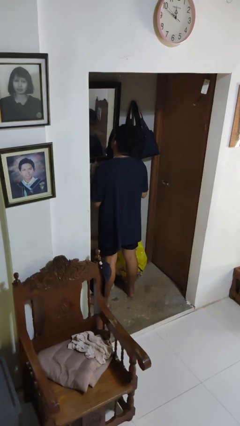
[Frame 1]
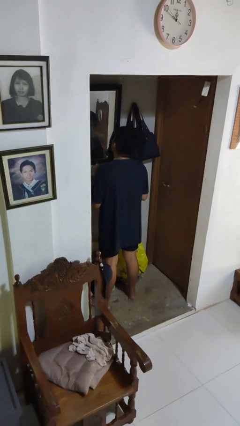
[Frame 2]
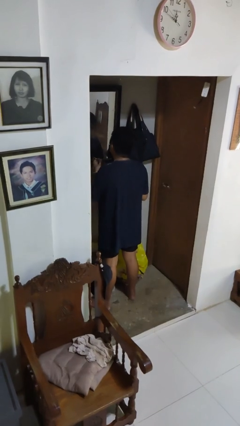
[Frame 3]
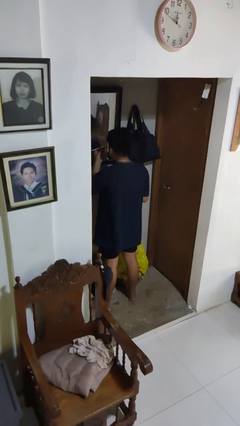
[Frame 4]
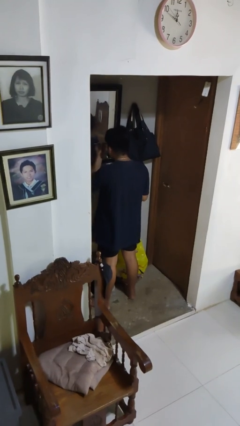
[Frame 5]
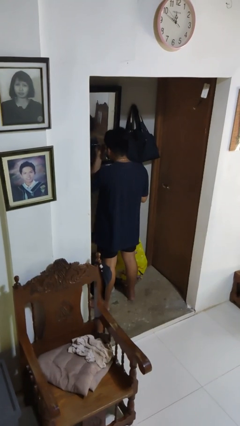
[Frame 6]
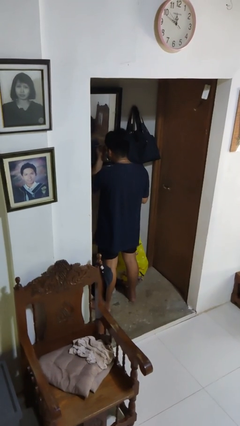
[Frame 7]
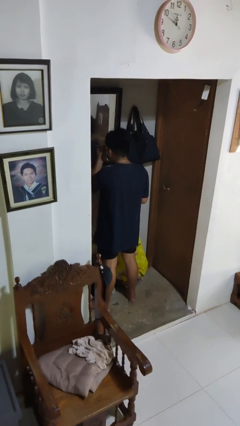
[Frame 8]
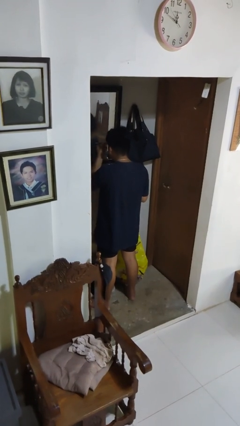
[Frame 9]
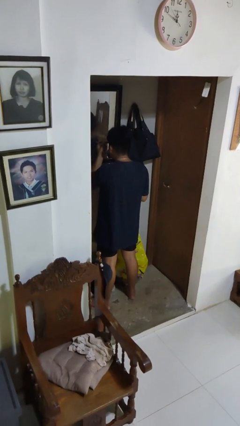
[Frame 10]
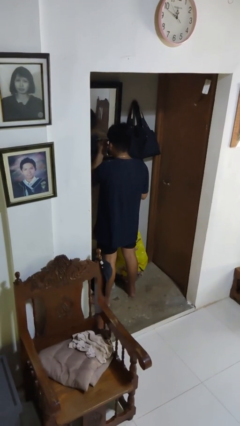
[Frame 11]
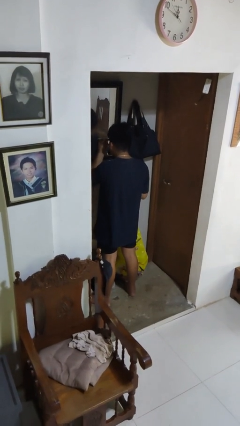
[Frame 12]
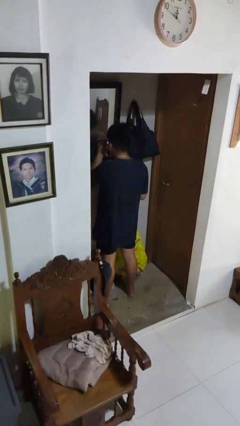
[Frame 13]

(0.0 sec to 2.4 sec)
person applies eye makeup

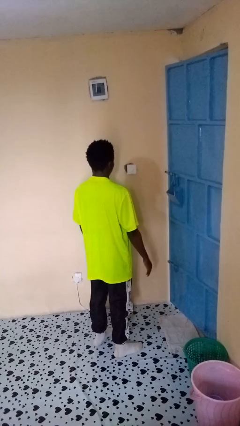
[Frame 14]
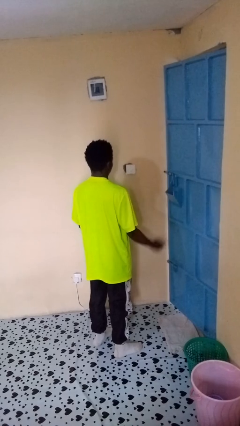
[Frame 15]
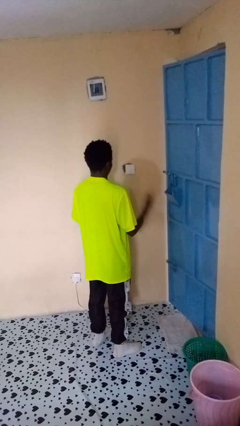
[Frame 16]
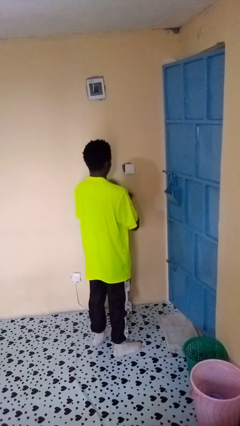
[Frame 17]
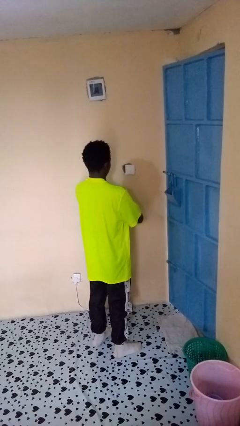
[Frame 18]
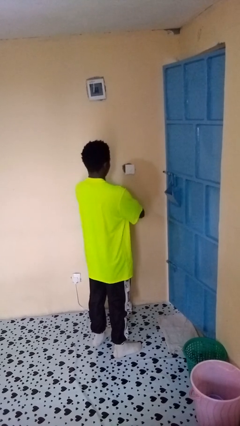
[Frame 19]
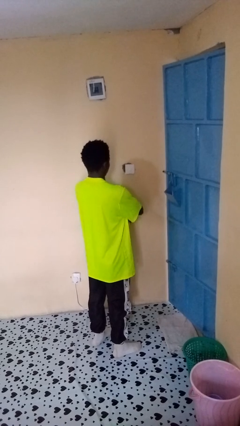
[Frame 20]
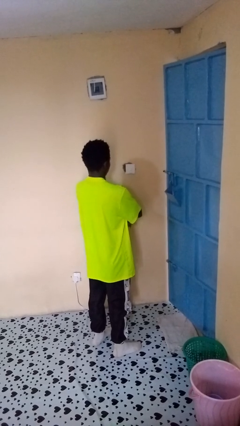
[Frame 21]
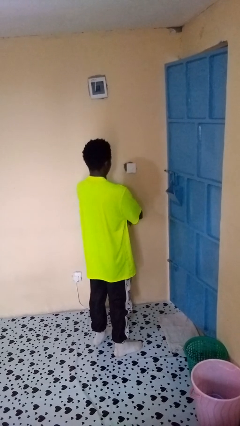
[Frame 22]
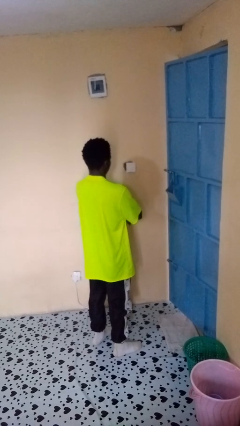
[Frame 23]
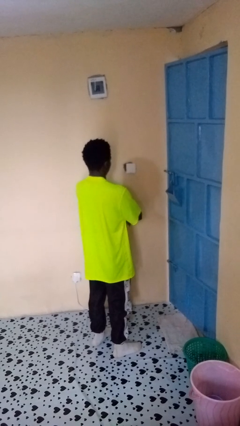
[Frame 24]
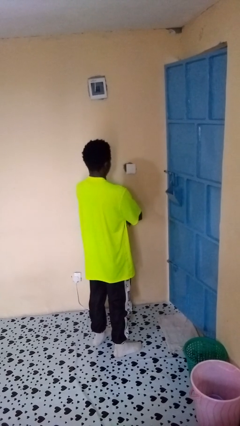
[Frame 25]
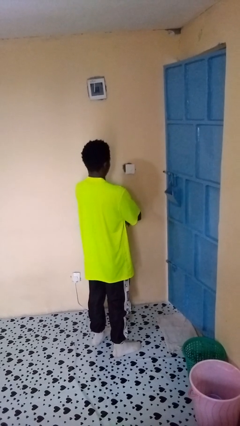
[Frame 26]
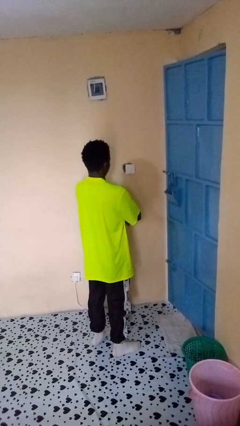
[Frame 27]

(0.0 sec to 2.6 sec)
person crosses arms

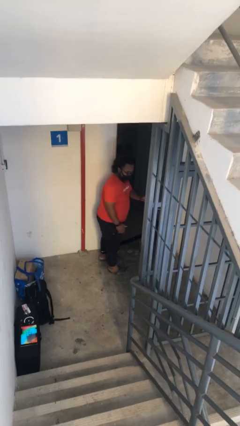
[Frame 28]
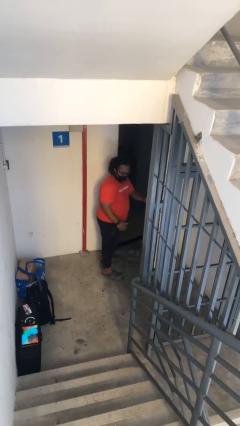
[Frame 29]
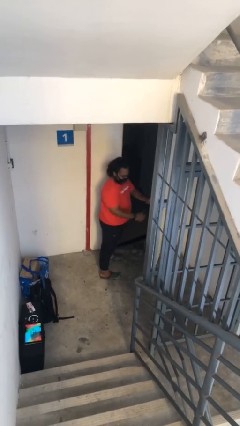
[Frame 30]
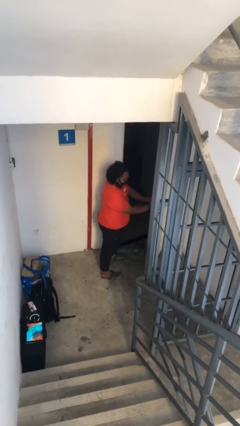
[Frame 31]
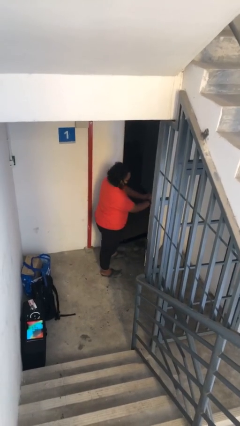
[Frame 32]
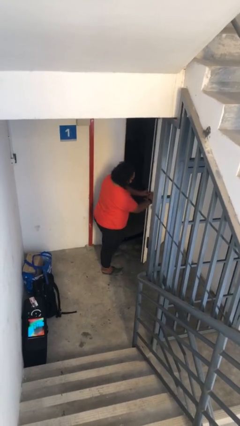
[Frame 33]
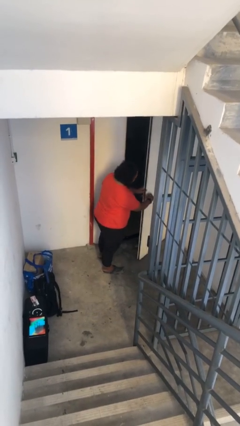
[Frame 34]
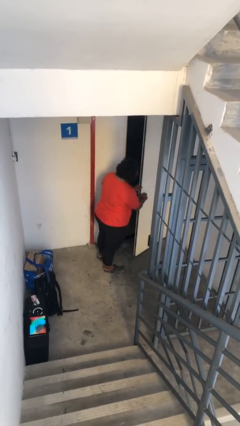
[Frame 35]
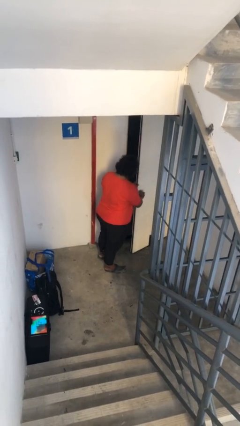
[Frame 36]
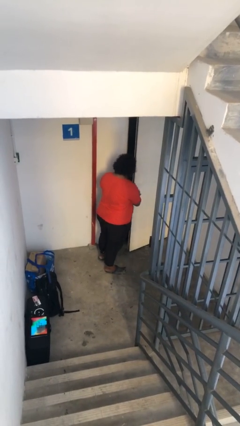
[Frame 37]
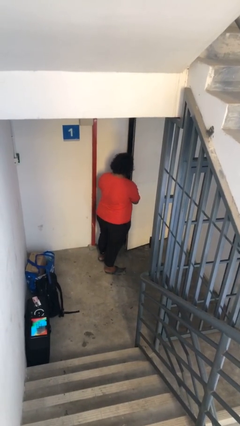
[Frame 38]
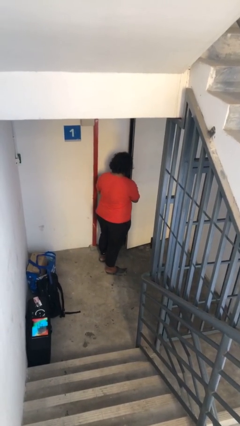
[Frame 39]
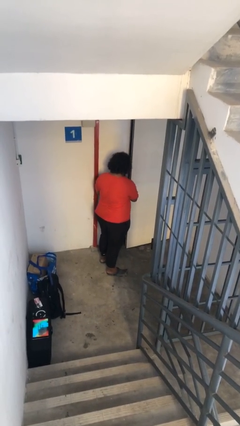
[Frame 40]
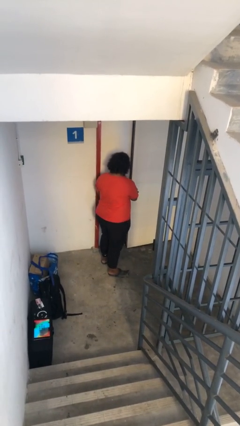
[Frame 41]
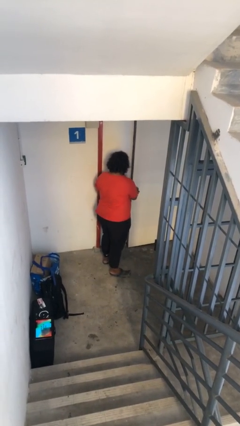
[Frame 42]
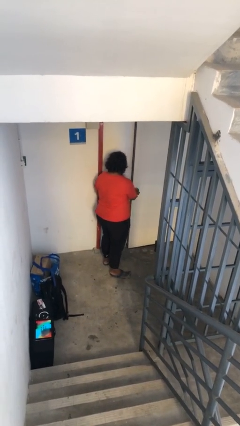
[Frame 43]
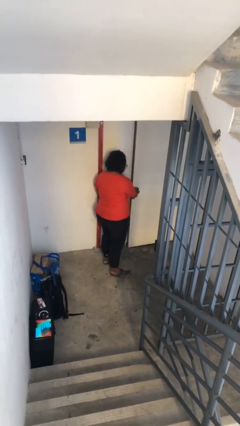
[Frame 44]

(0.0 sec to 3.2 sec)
person closes facility door

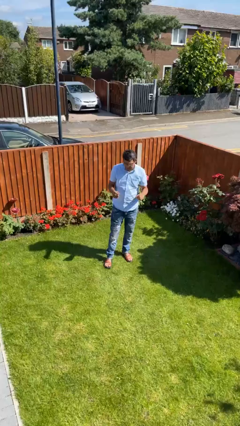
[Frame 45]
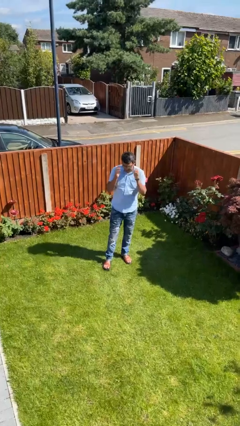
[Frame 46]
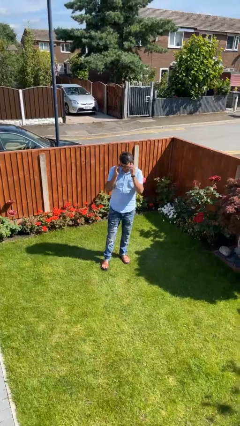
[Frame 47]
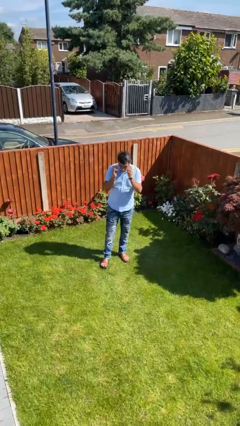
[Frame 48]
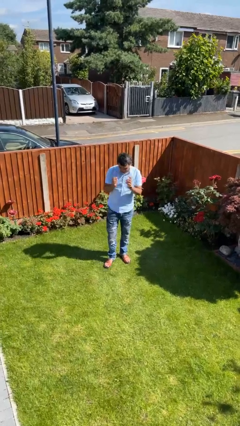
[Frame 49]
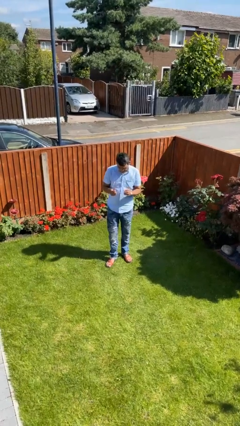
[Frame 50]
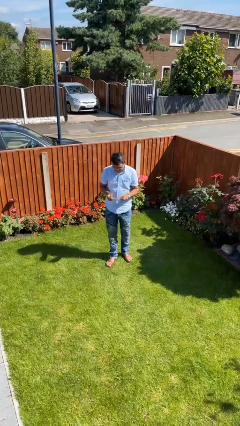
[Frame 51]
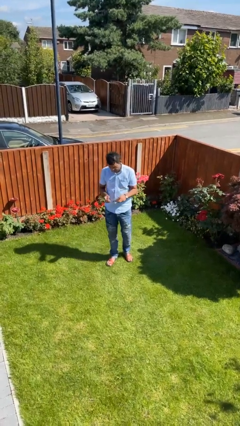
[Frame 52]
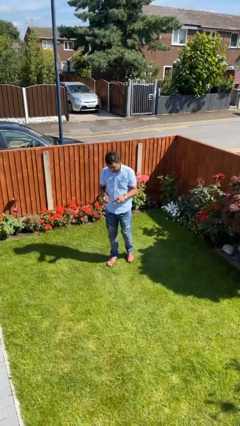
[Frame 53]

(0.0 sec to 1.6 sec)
person takes off glasses

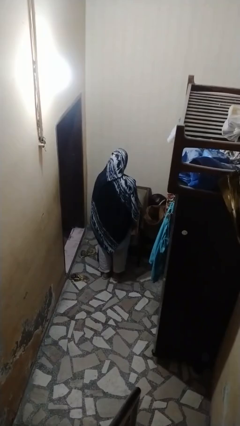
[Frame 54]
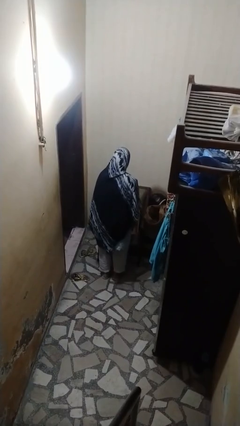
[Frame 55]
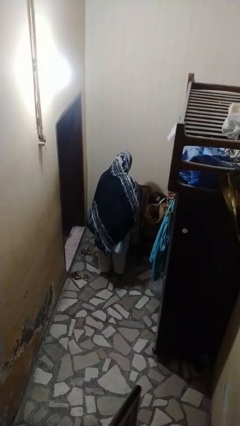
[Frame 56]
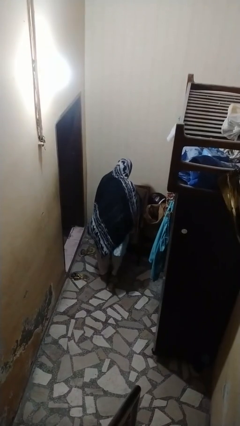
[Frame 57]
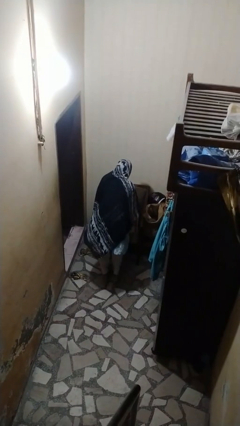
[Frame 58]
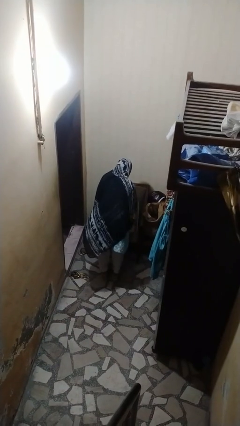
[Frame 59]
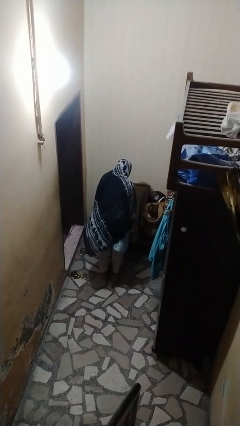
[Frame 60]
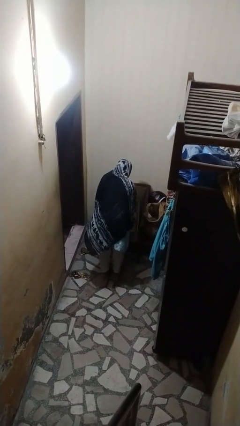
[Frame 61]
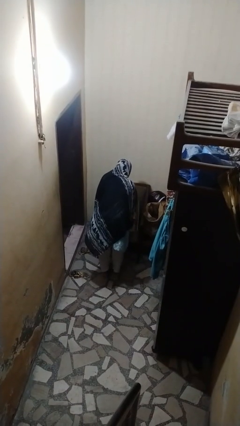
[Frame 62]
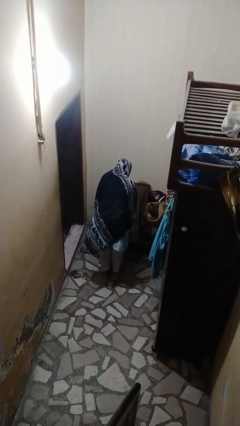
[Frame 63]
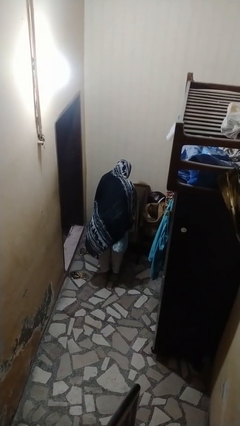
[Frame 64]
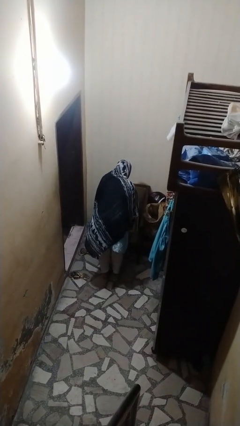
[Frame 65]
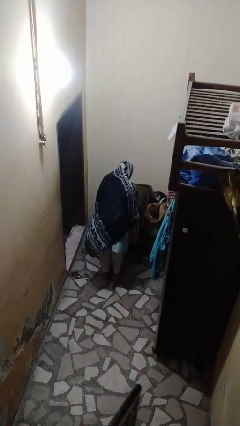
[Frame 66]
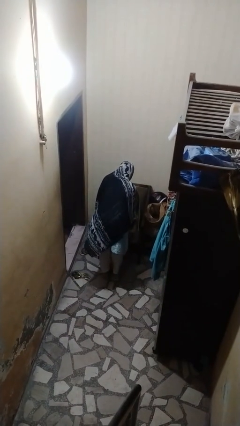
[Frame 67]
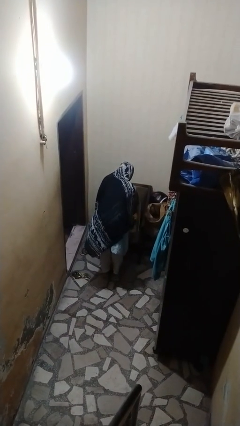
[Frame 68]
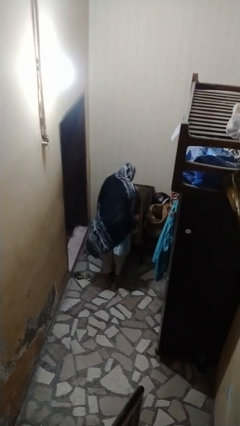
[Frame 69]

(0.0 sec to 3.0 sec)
person searches in box

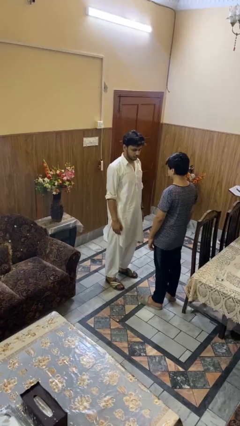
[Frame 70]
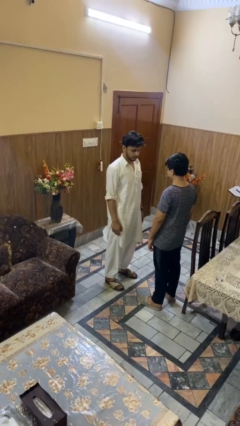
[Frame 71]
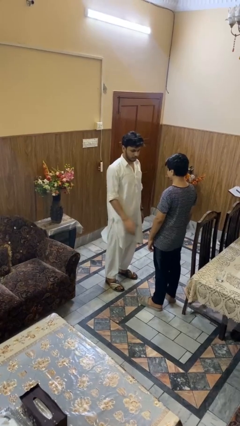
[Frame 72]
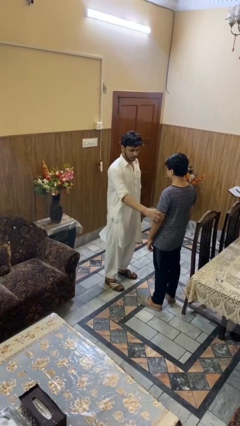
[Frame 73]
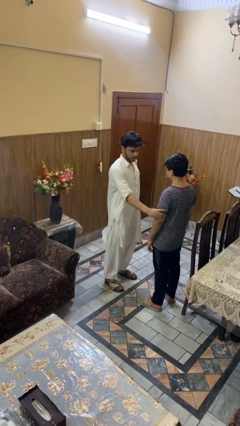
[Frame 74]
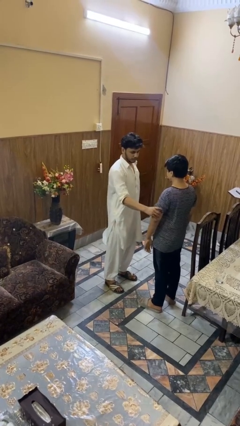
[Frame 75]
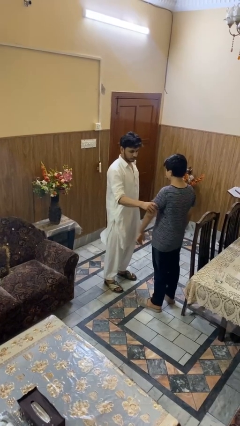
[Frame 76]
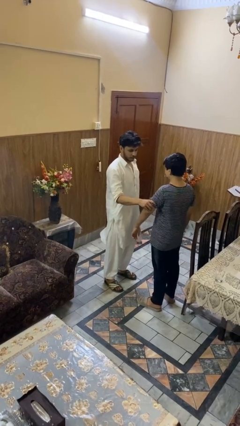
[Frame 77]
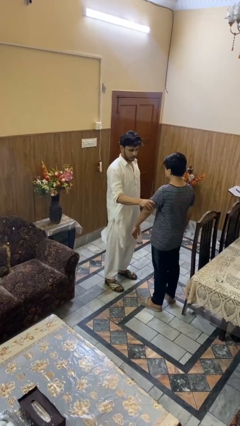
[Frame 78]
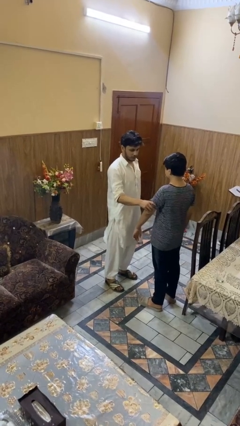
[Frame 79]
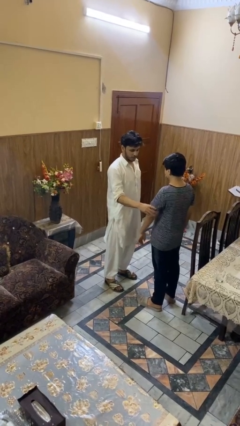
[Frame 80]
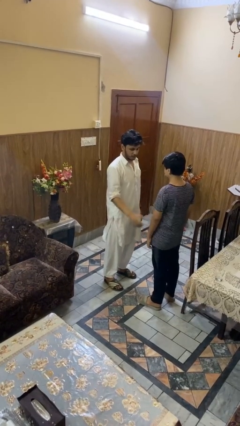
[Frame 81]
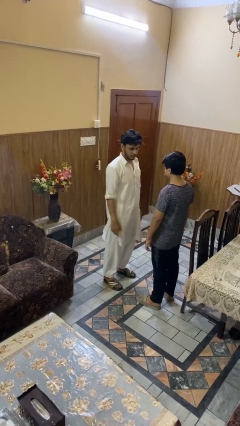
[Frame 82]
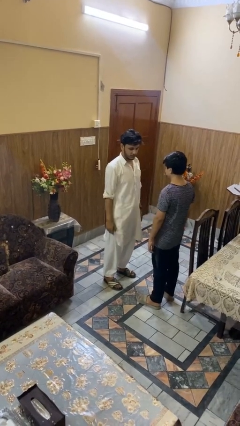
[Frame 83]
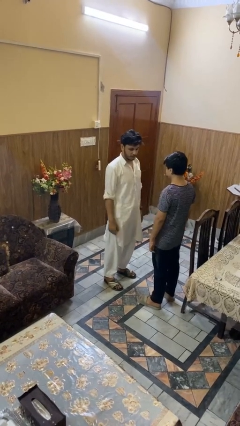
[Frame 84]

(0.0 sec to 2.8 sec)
person grabs person by bicep

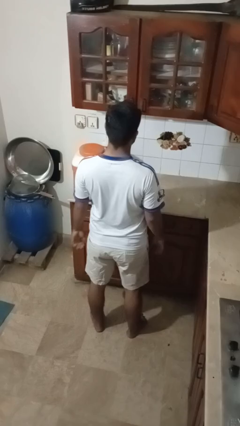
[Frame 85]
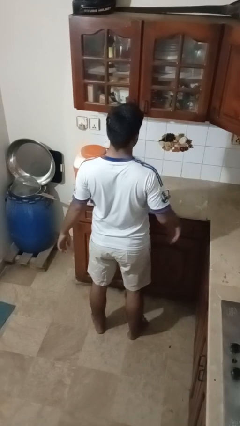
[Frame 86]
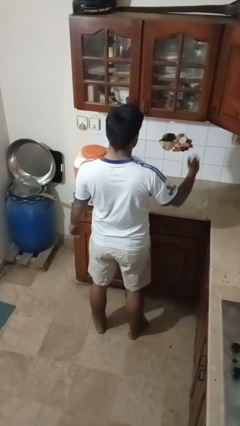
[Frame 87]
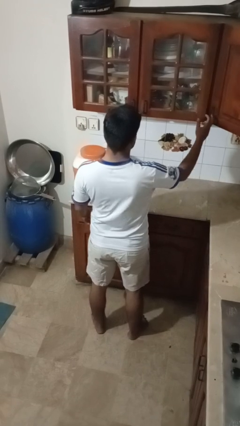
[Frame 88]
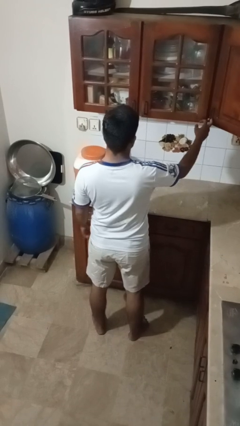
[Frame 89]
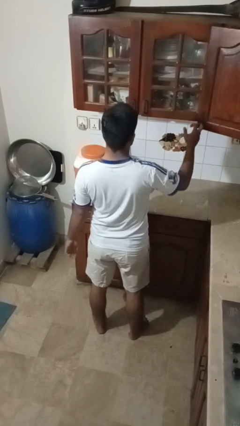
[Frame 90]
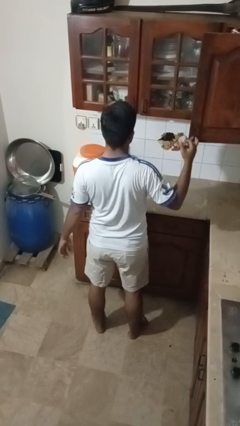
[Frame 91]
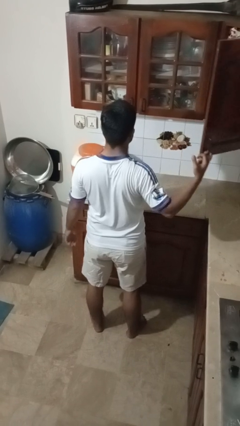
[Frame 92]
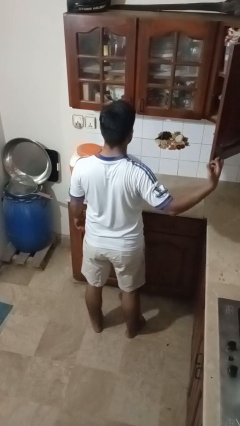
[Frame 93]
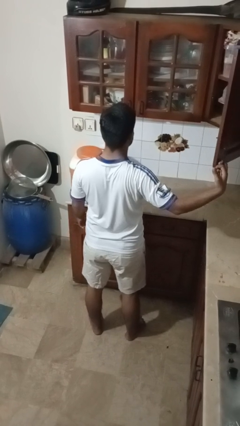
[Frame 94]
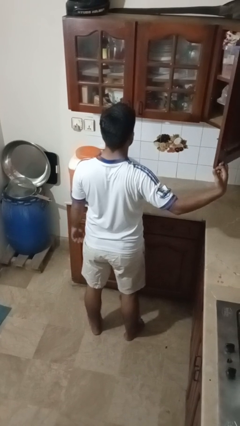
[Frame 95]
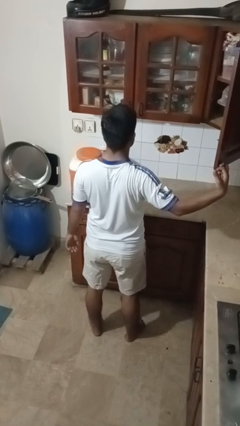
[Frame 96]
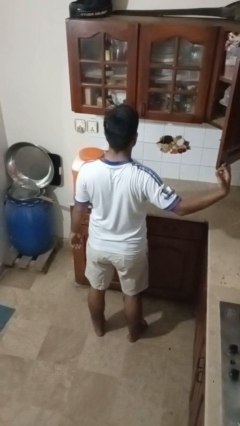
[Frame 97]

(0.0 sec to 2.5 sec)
person opens cabinet
